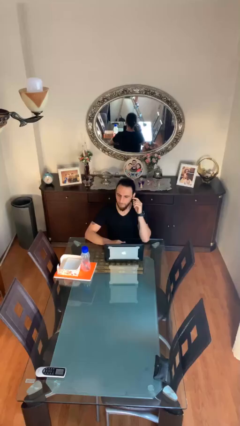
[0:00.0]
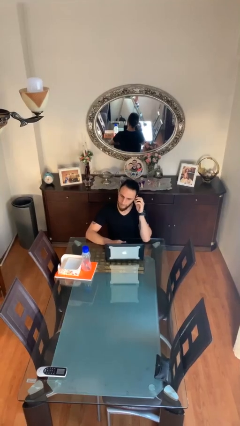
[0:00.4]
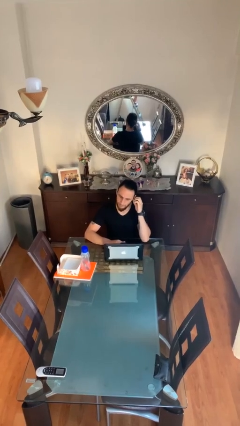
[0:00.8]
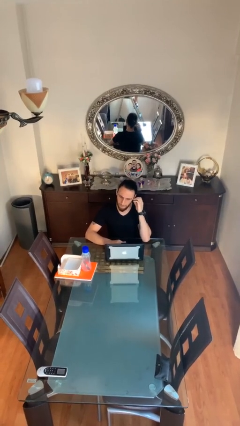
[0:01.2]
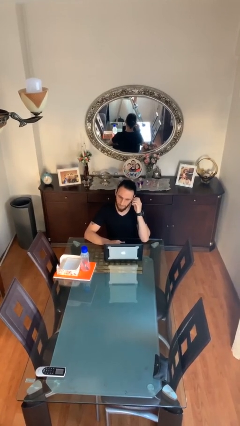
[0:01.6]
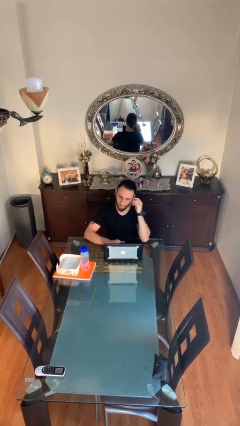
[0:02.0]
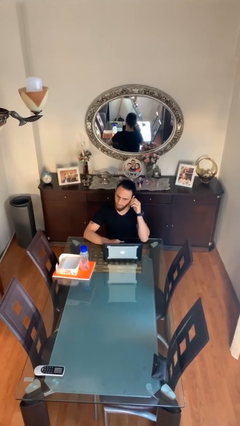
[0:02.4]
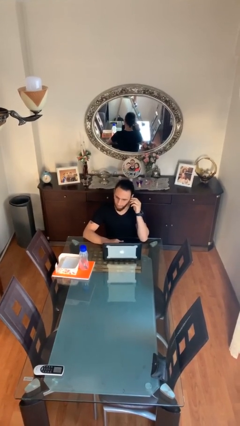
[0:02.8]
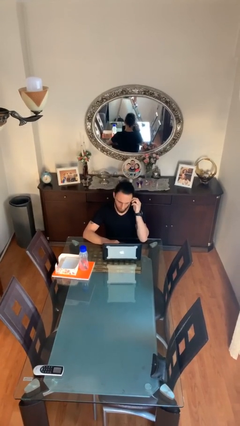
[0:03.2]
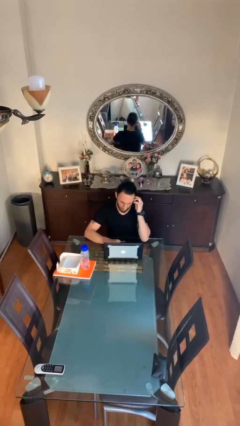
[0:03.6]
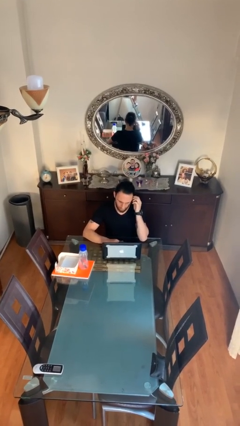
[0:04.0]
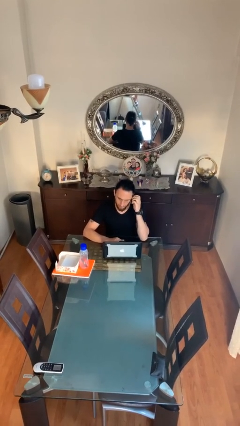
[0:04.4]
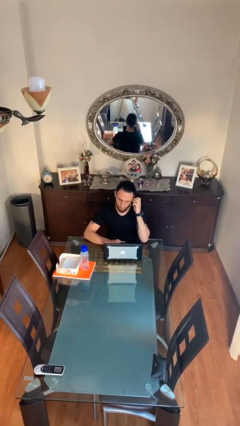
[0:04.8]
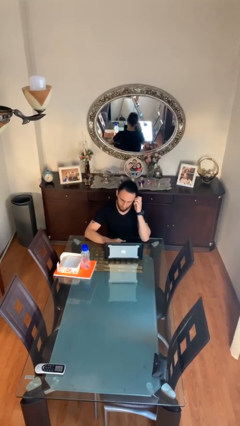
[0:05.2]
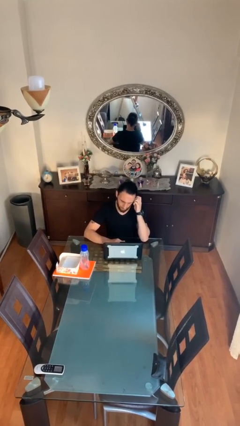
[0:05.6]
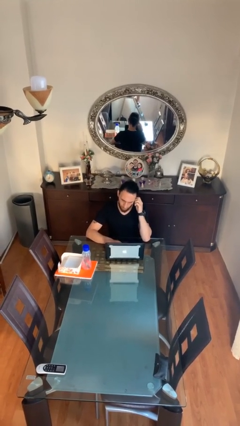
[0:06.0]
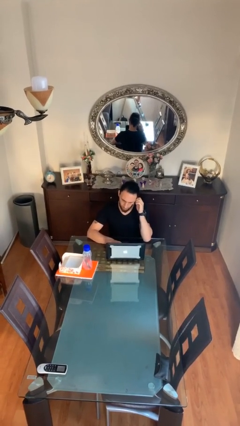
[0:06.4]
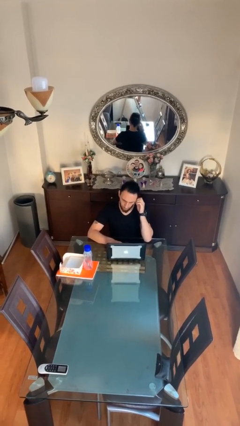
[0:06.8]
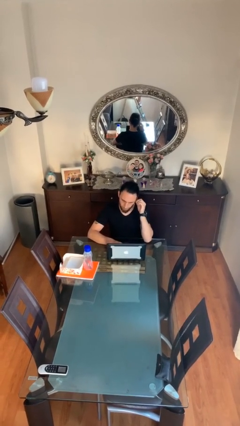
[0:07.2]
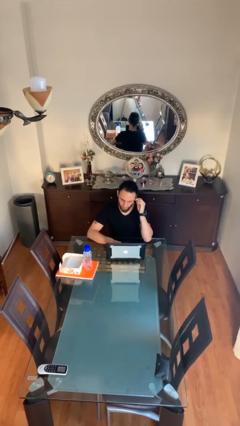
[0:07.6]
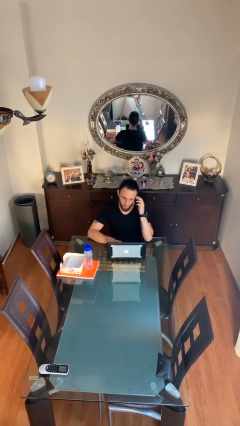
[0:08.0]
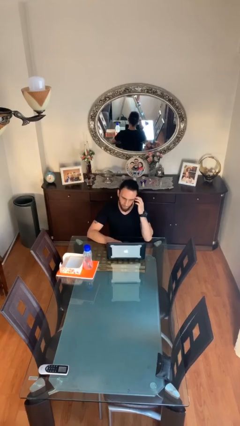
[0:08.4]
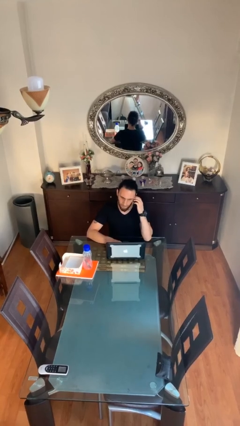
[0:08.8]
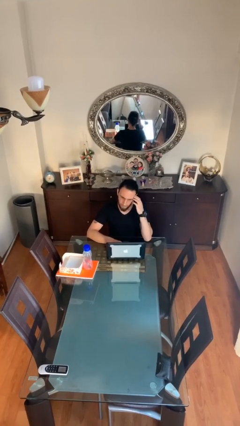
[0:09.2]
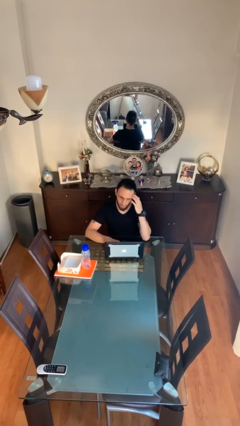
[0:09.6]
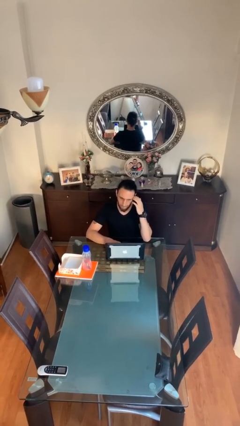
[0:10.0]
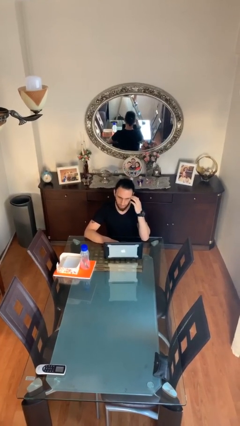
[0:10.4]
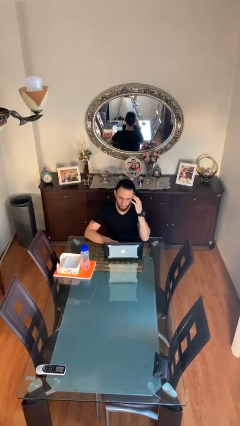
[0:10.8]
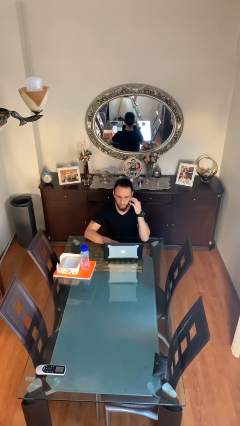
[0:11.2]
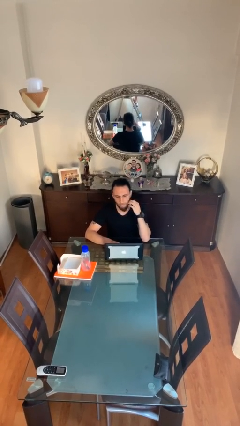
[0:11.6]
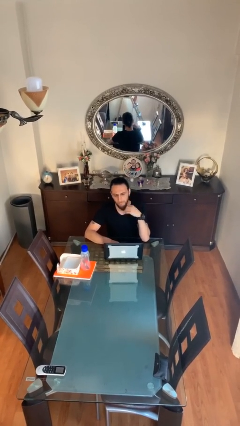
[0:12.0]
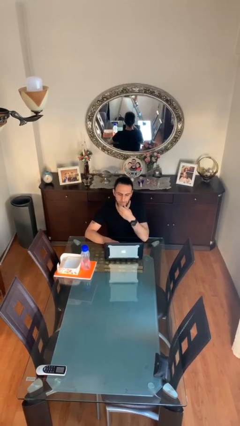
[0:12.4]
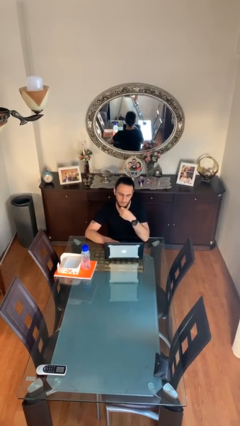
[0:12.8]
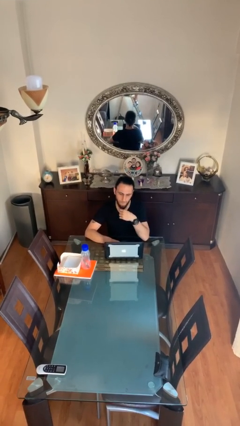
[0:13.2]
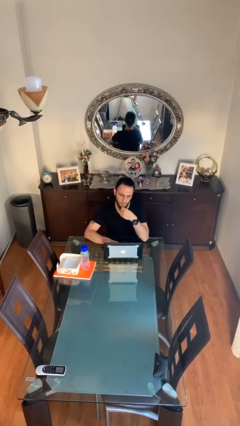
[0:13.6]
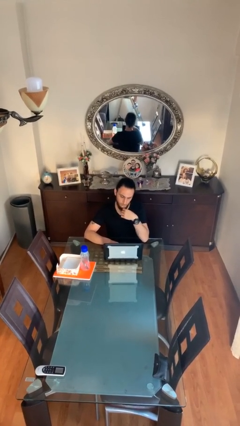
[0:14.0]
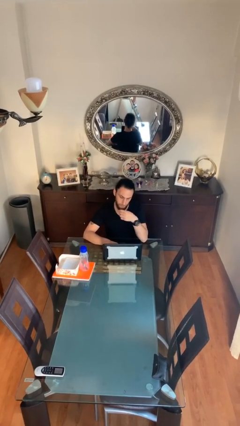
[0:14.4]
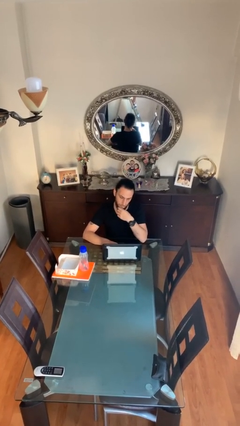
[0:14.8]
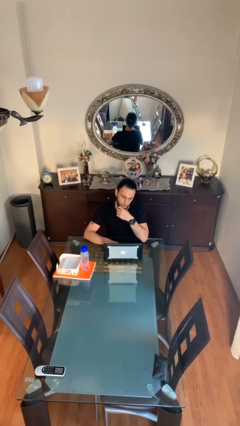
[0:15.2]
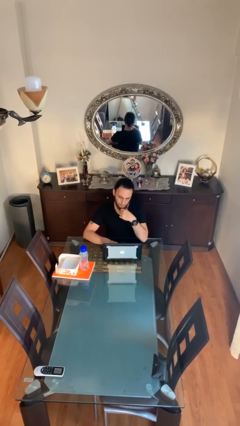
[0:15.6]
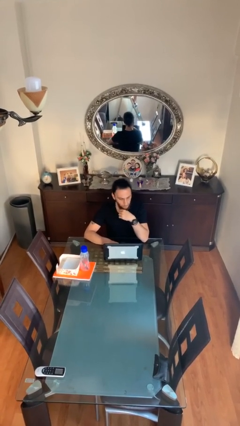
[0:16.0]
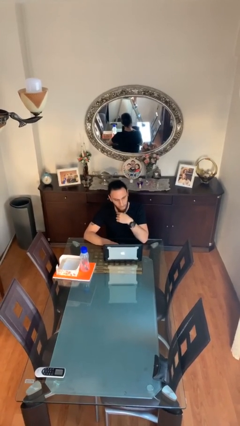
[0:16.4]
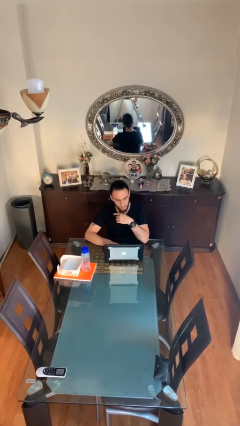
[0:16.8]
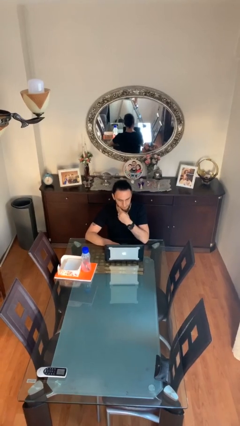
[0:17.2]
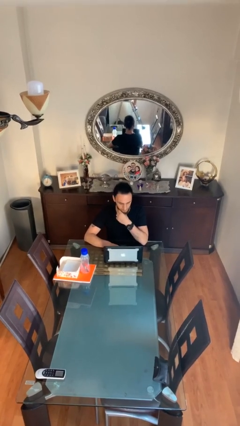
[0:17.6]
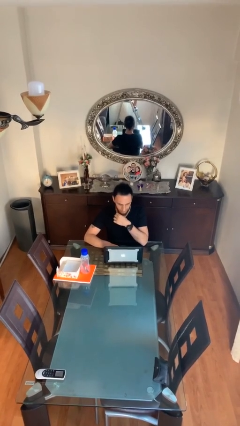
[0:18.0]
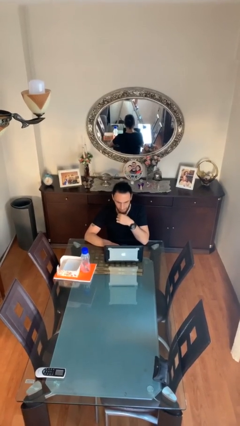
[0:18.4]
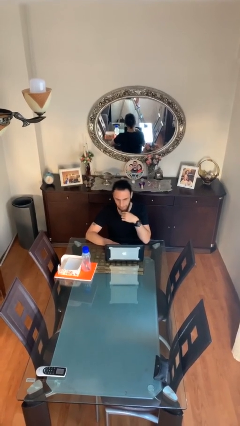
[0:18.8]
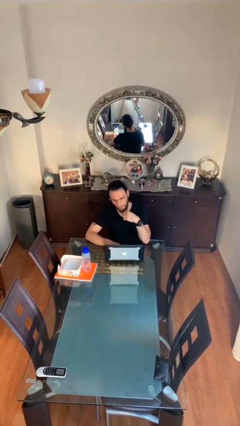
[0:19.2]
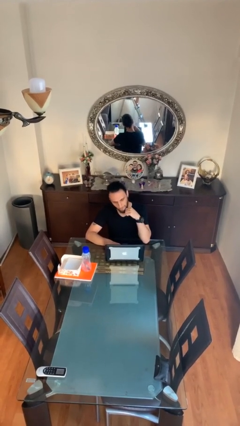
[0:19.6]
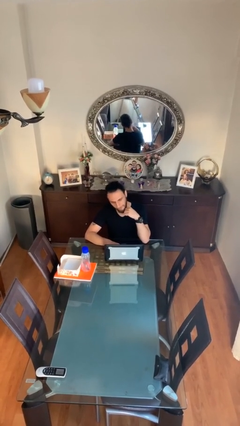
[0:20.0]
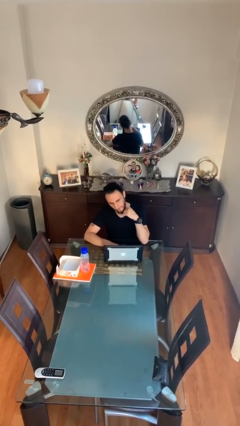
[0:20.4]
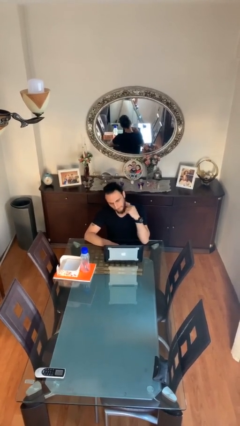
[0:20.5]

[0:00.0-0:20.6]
person interacts with laptop

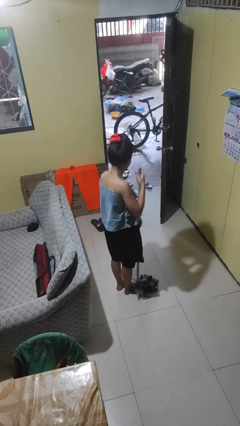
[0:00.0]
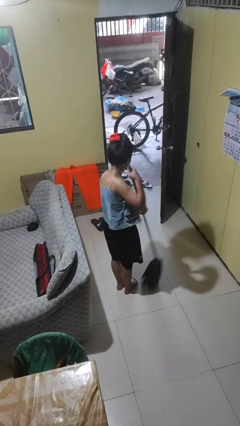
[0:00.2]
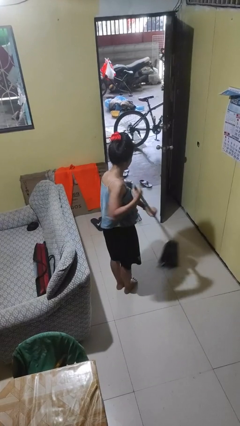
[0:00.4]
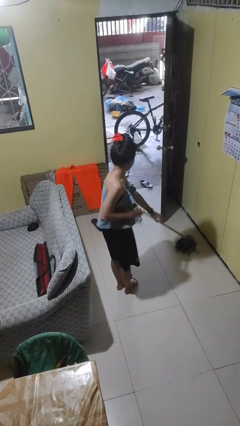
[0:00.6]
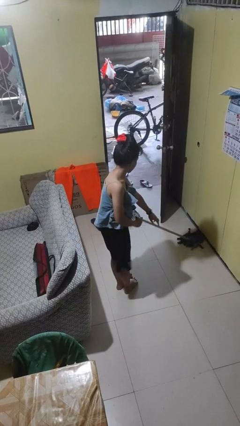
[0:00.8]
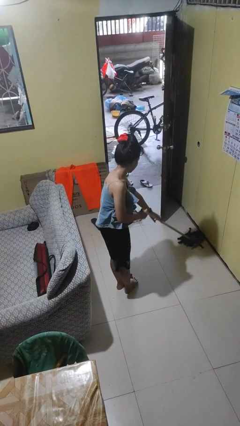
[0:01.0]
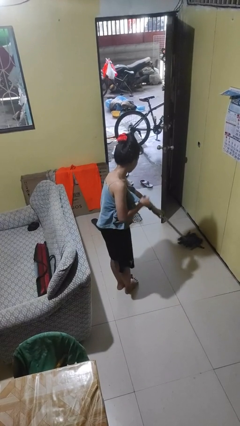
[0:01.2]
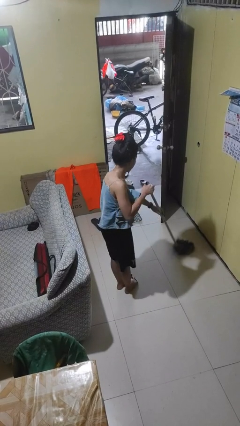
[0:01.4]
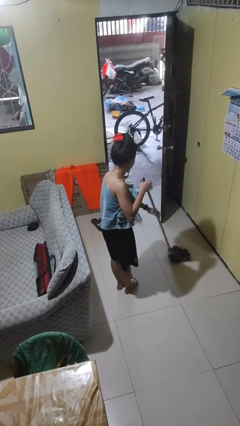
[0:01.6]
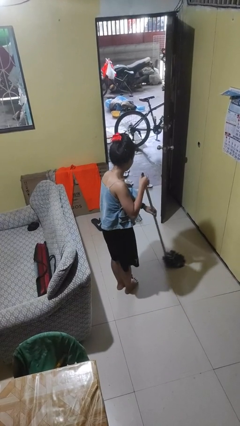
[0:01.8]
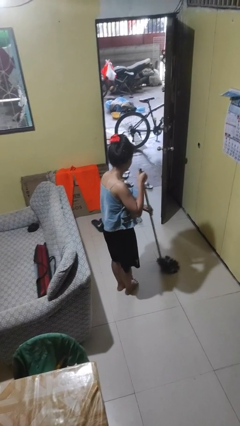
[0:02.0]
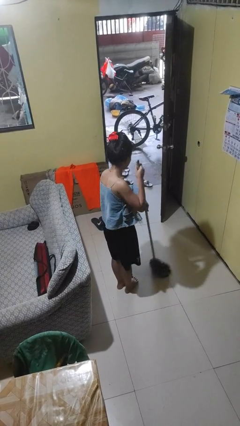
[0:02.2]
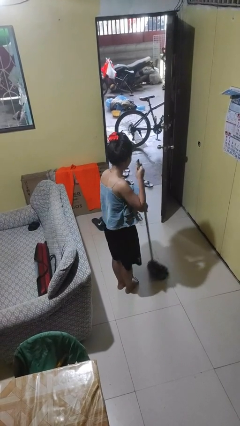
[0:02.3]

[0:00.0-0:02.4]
person mops

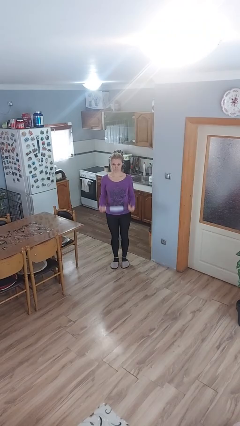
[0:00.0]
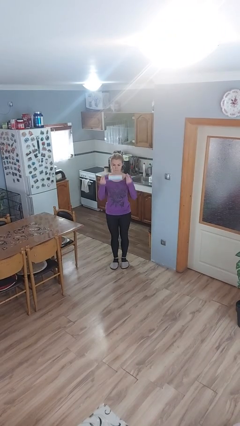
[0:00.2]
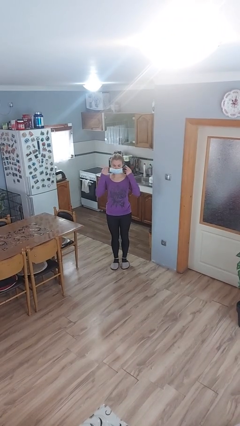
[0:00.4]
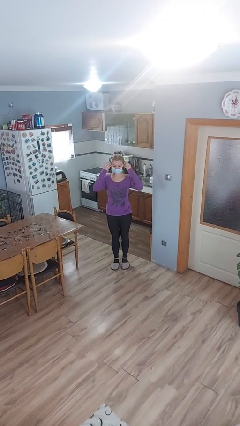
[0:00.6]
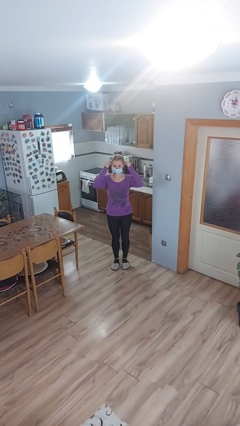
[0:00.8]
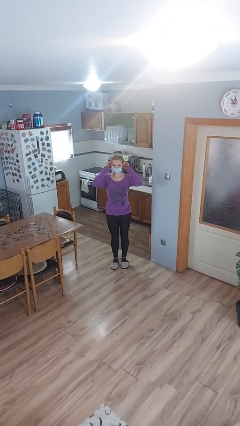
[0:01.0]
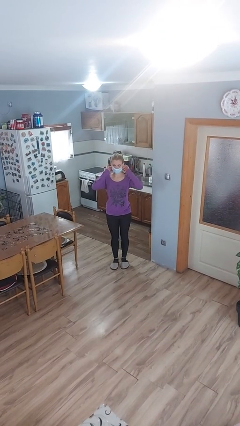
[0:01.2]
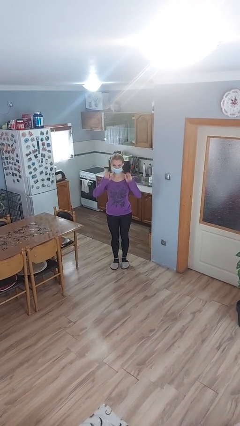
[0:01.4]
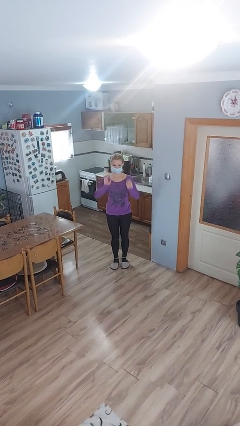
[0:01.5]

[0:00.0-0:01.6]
person puts on facemask

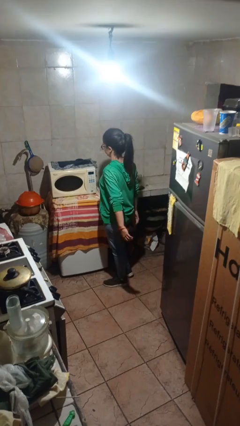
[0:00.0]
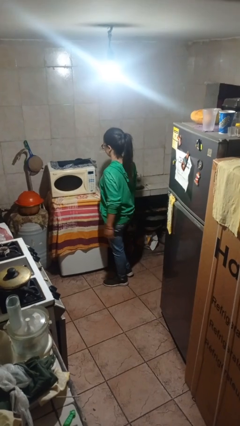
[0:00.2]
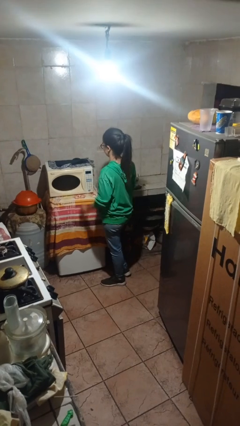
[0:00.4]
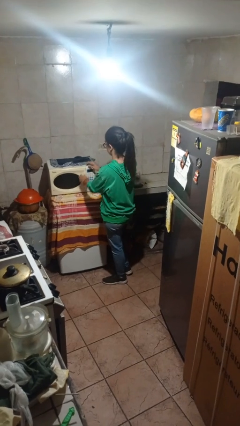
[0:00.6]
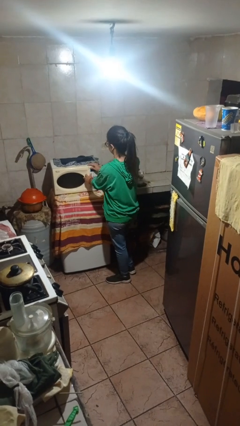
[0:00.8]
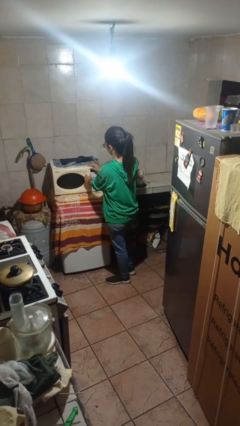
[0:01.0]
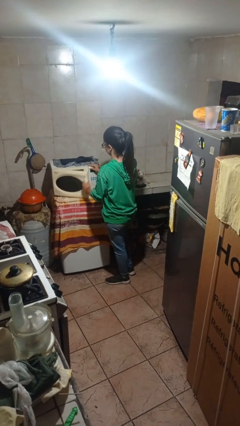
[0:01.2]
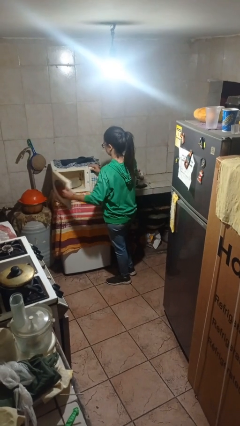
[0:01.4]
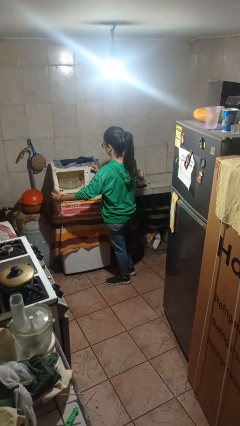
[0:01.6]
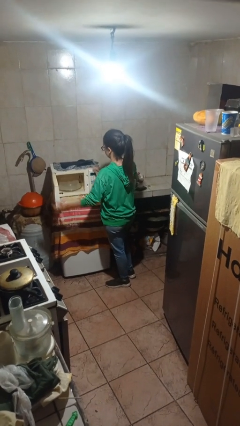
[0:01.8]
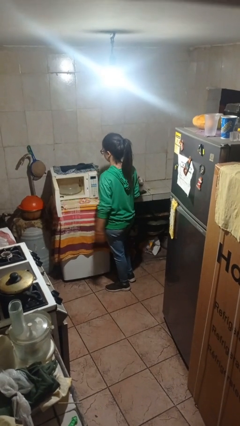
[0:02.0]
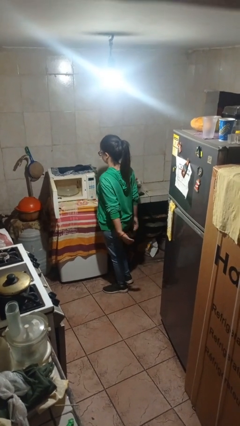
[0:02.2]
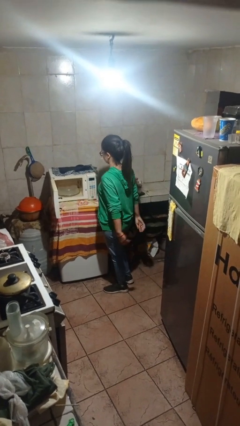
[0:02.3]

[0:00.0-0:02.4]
person opens microwave

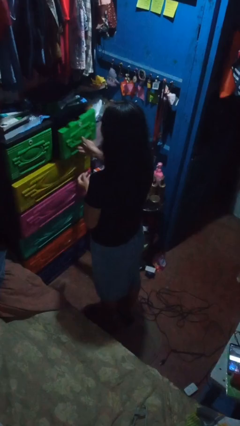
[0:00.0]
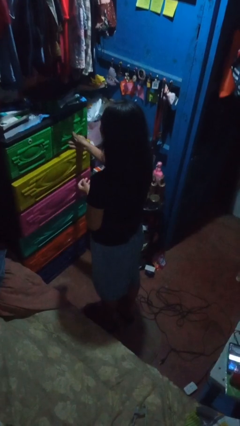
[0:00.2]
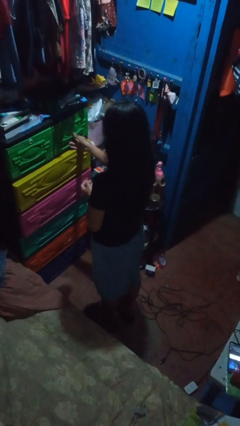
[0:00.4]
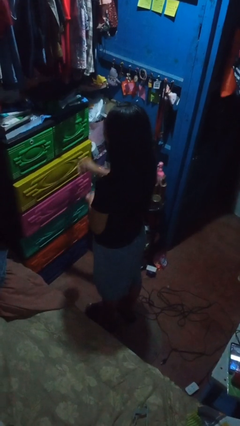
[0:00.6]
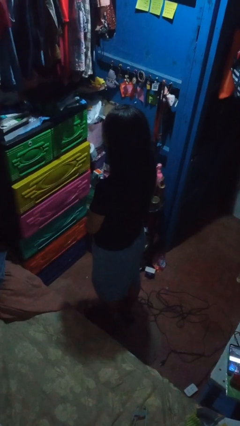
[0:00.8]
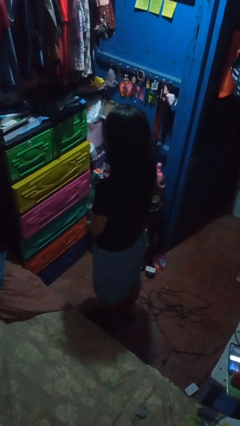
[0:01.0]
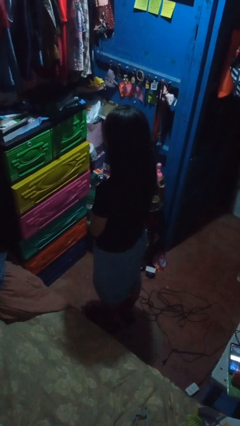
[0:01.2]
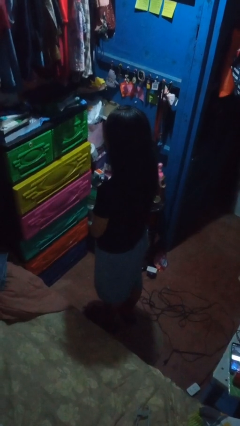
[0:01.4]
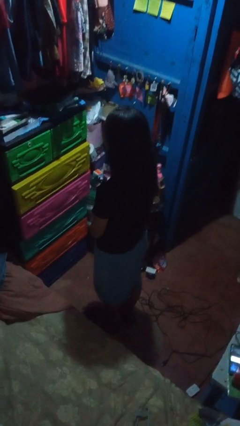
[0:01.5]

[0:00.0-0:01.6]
person closes dresser drawer
